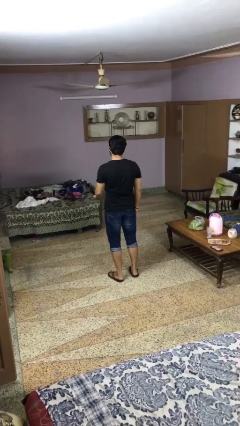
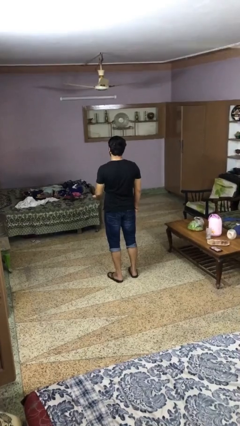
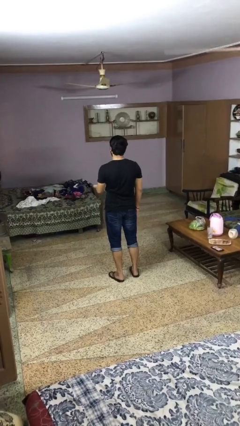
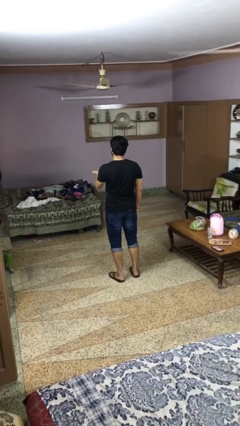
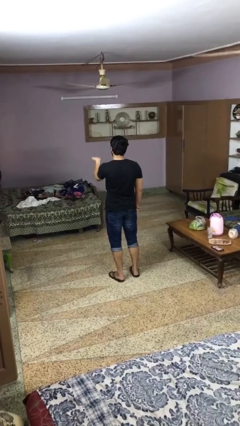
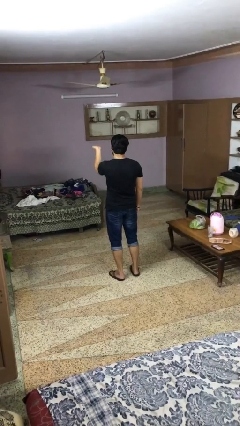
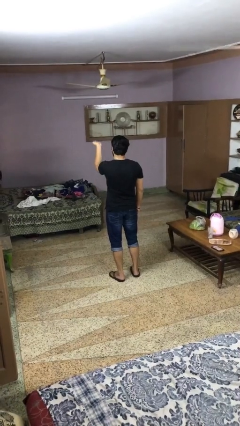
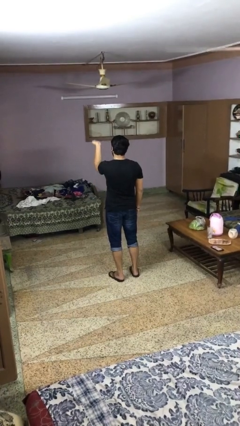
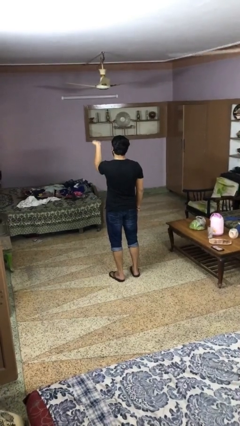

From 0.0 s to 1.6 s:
person gestures swipe up

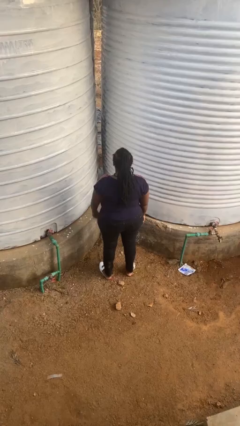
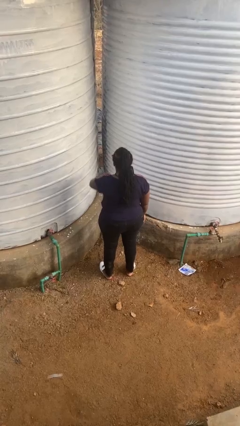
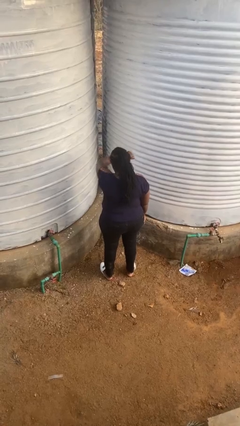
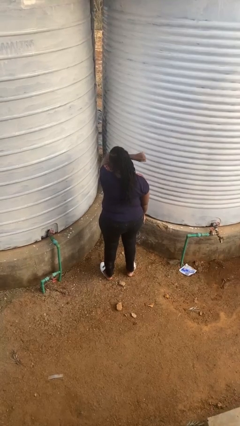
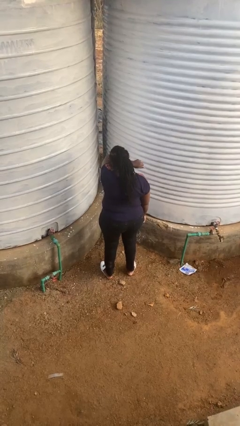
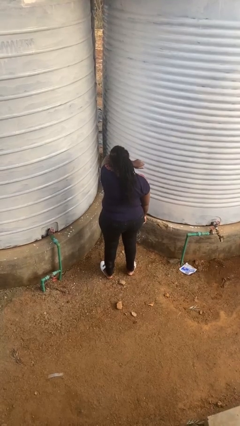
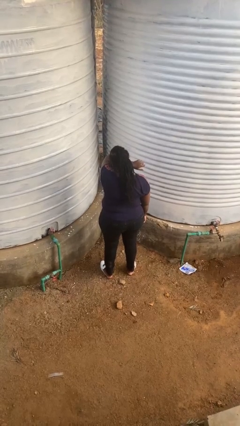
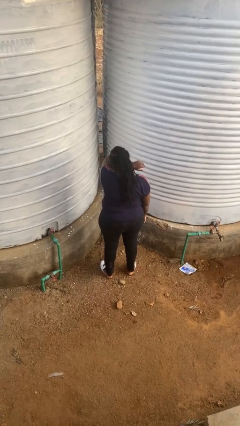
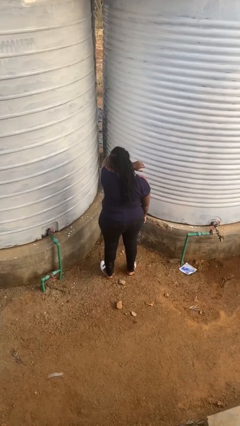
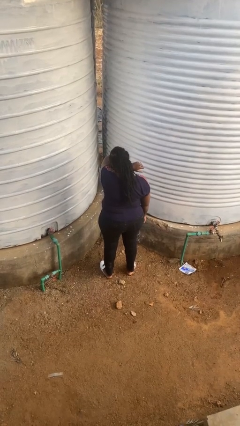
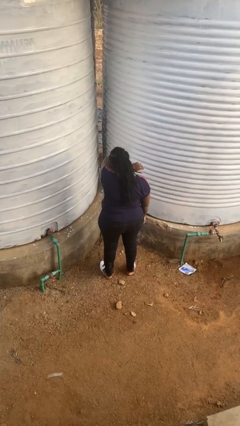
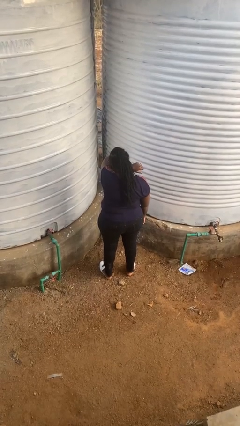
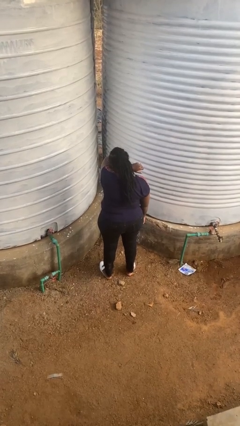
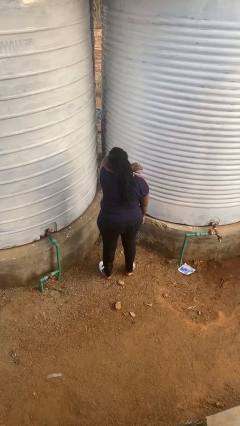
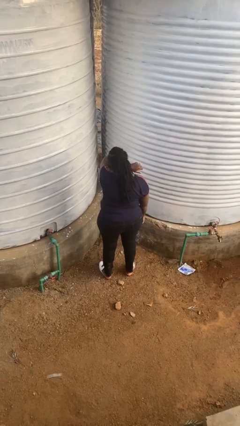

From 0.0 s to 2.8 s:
person sneezes into arm

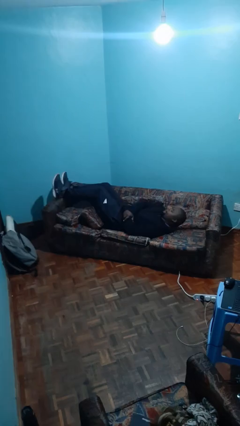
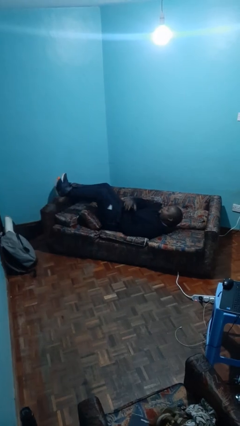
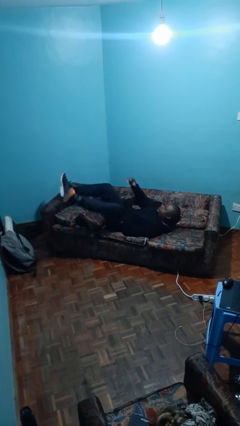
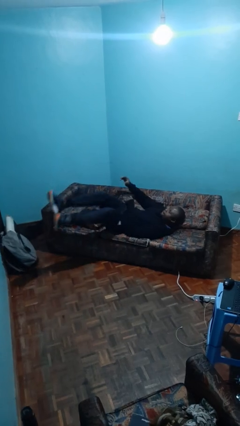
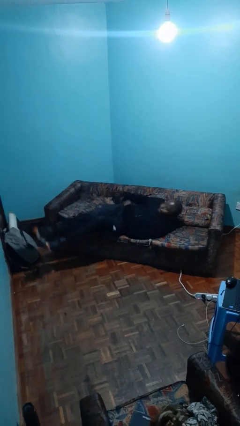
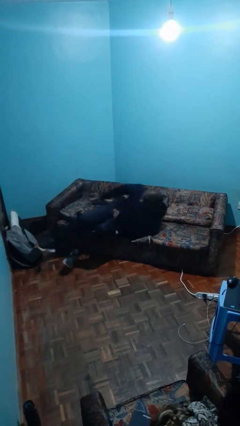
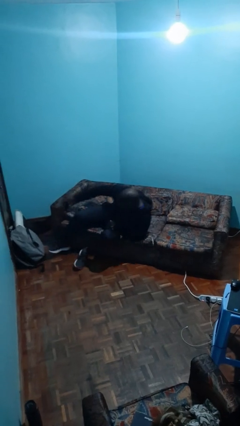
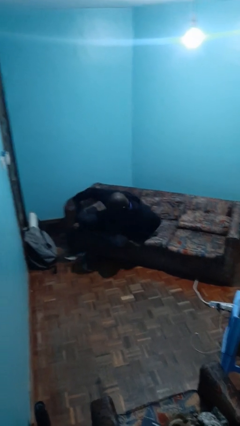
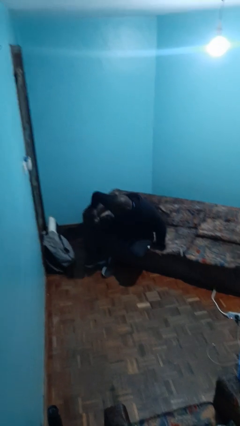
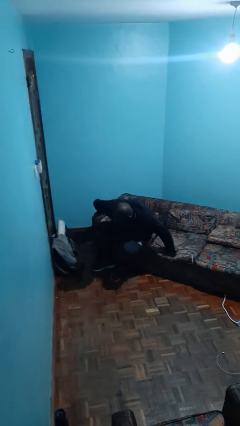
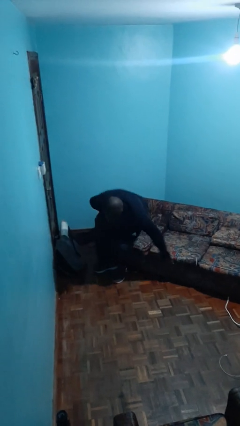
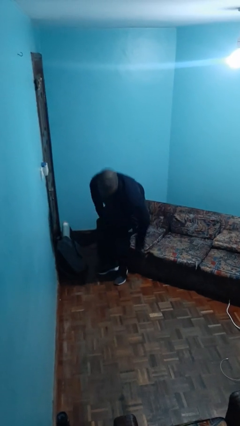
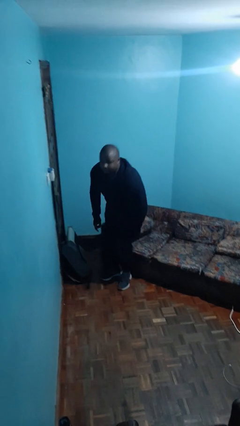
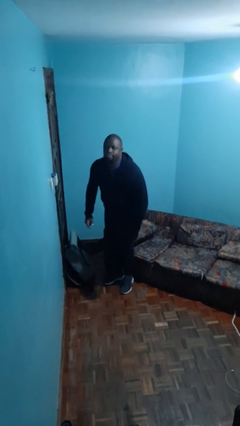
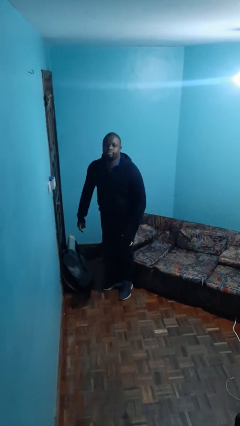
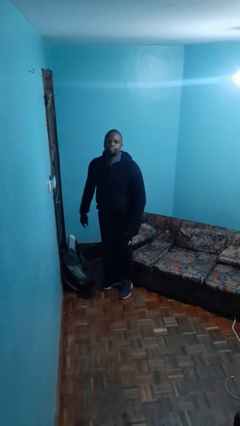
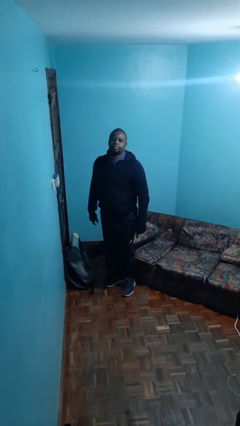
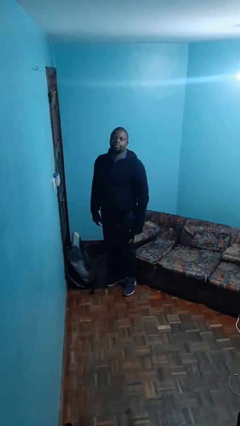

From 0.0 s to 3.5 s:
person stands up

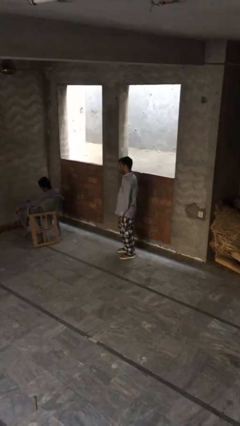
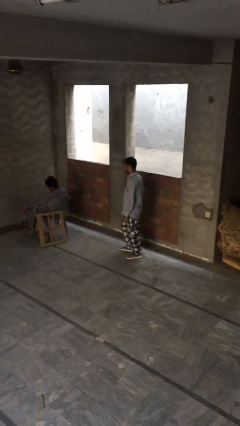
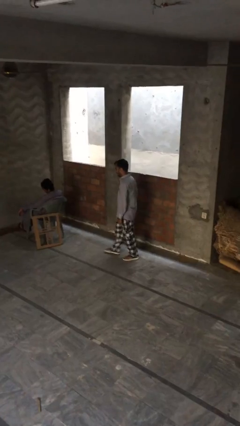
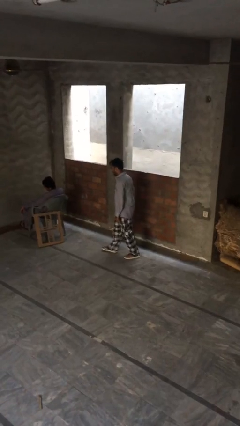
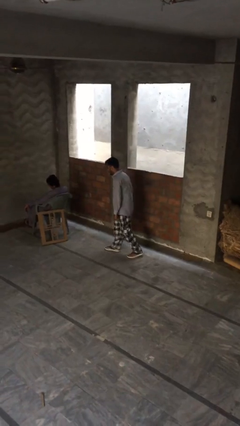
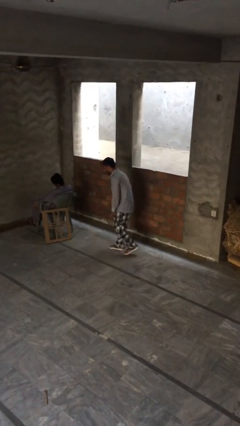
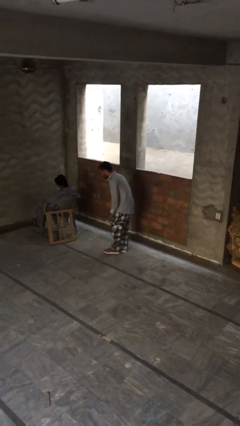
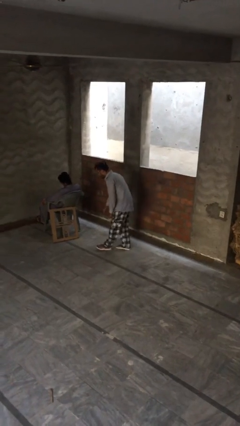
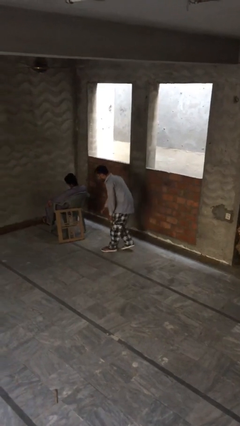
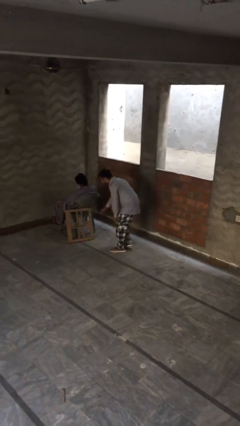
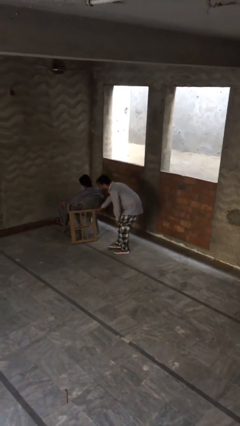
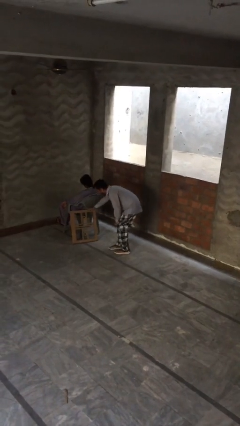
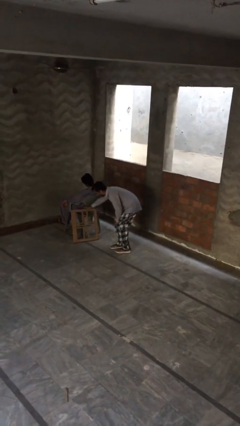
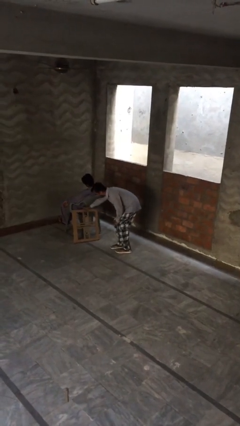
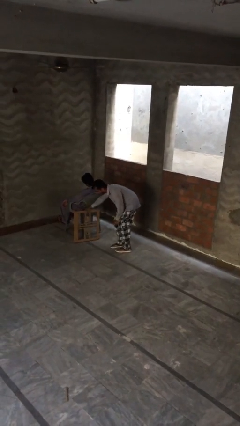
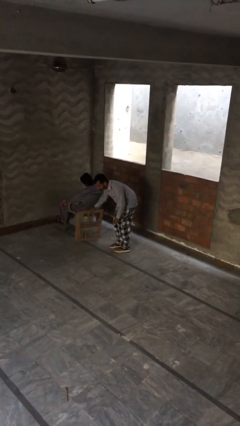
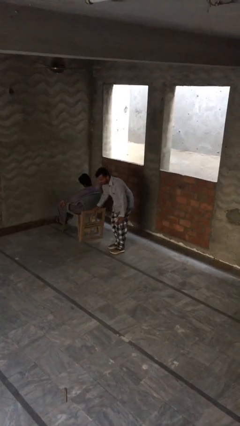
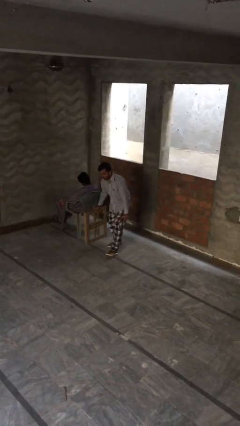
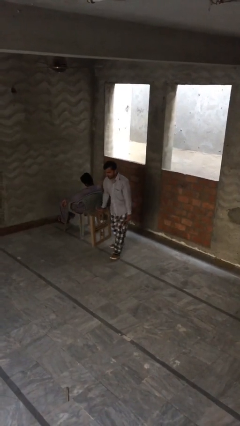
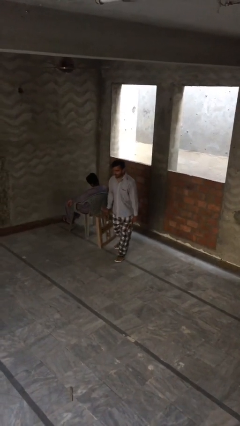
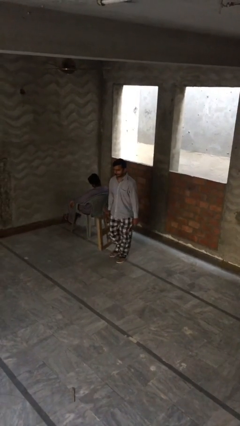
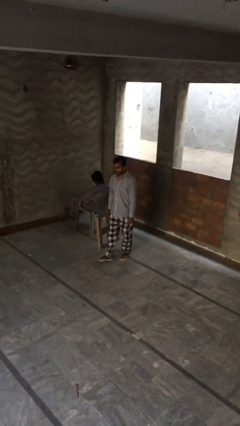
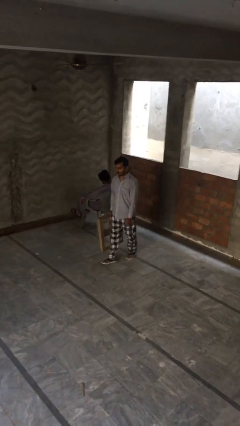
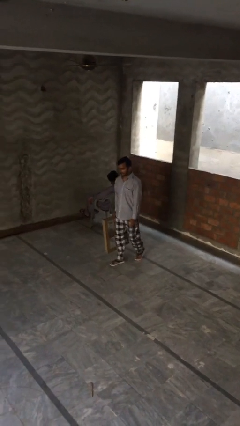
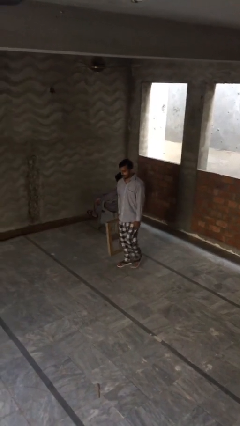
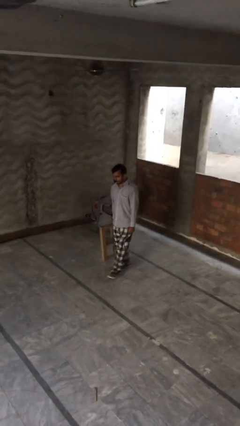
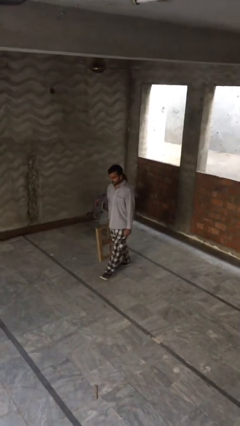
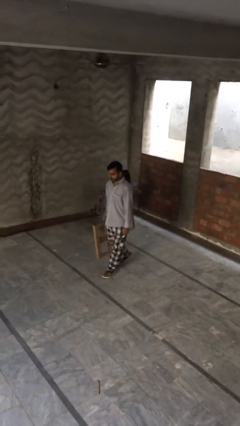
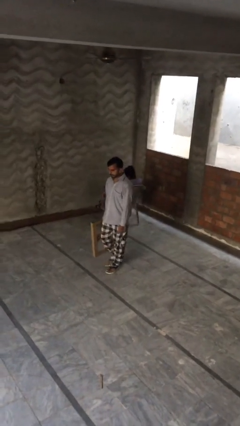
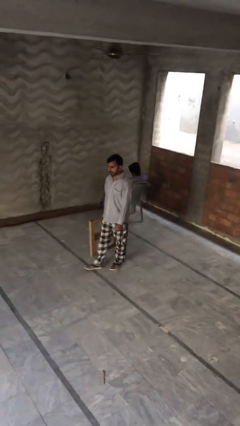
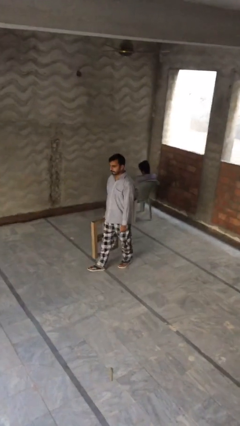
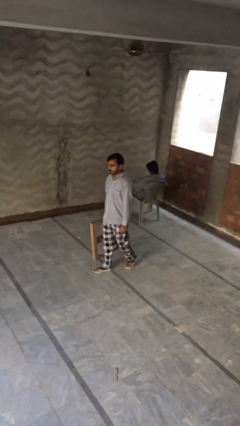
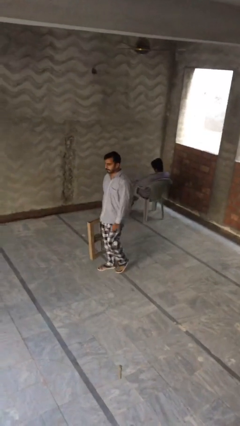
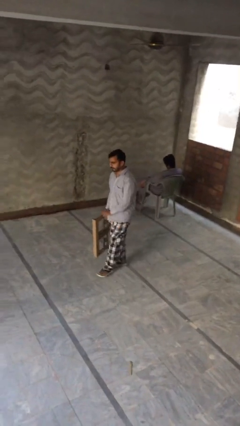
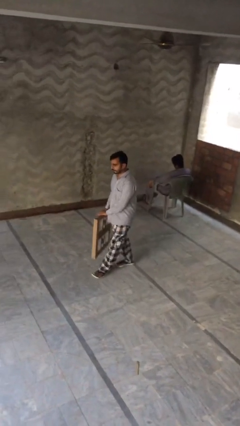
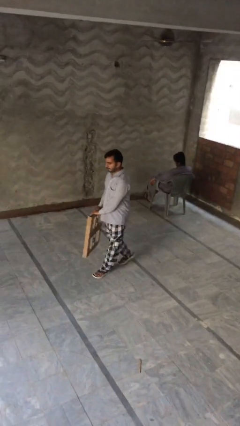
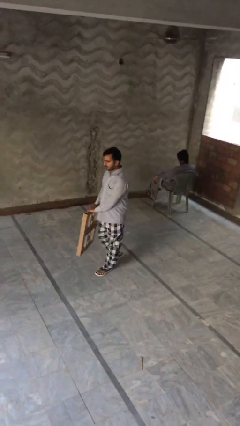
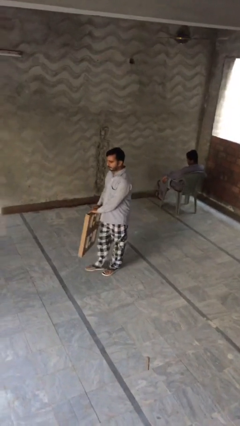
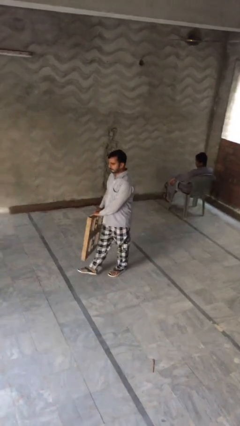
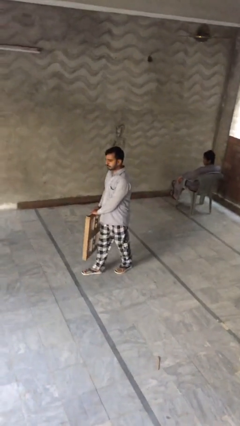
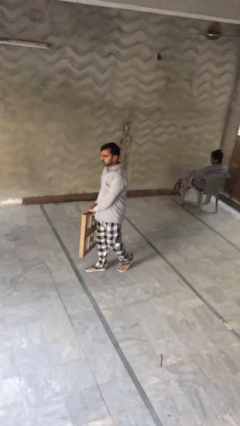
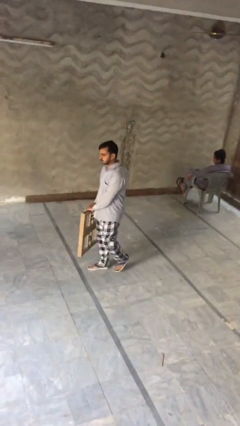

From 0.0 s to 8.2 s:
person steals object from person

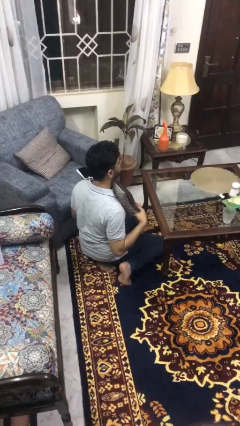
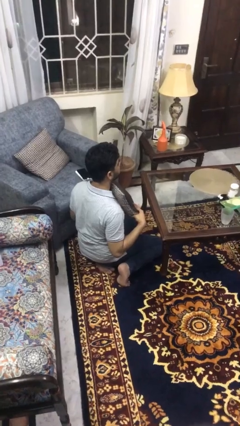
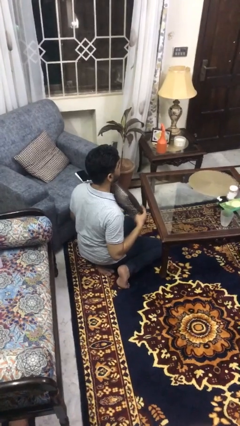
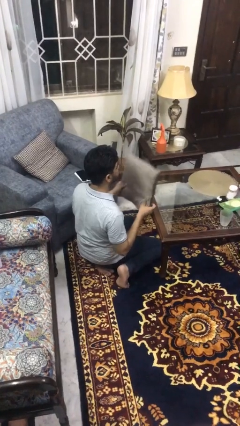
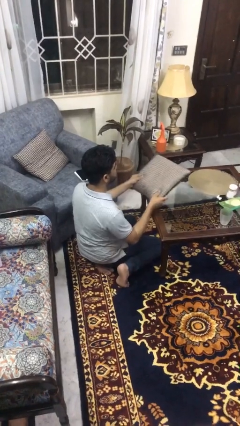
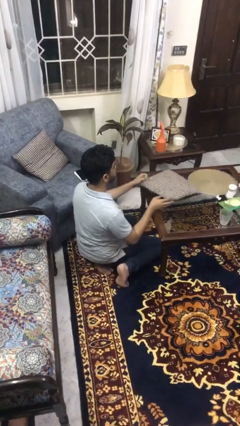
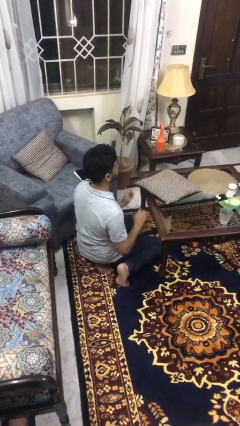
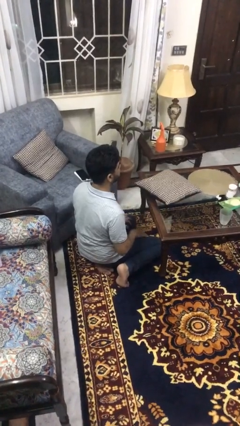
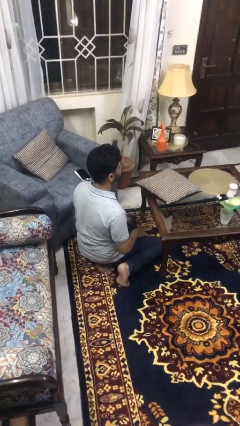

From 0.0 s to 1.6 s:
person throws object on table

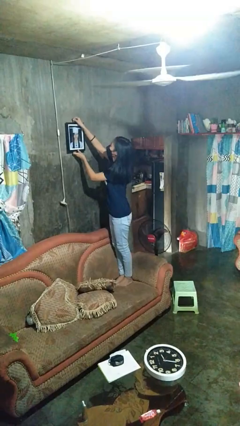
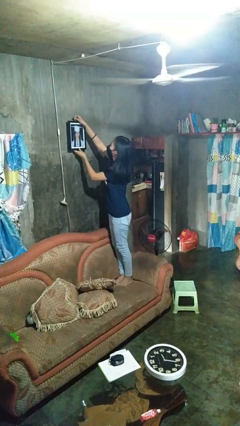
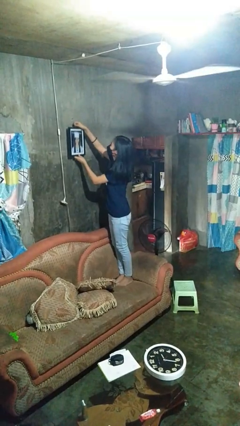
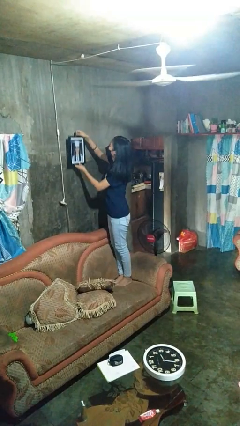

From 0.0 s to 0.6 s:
person takes down picture frame
